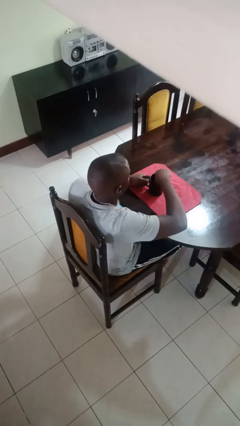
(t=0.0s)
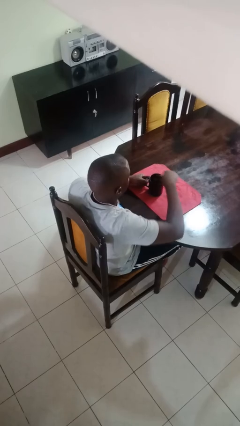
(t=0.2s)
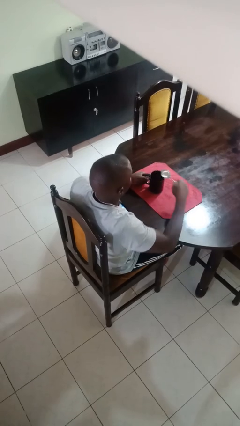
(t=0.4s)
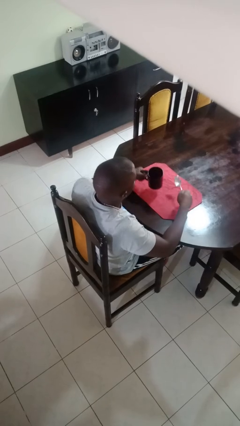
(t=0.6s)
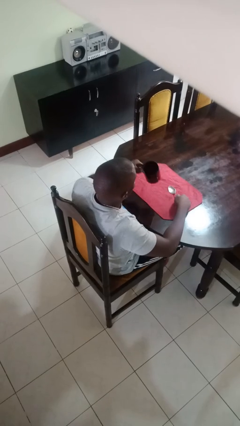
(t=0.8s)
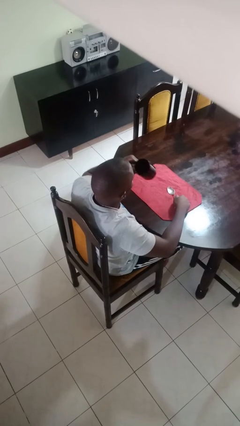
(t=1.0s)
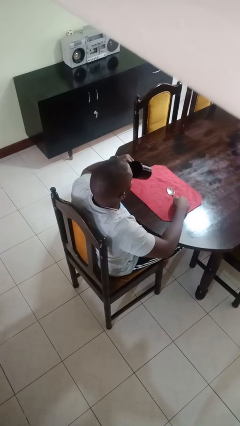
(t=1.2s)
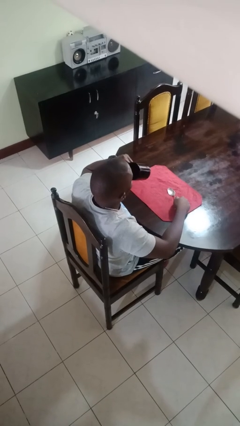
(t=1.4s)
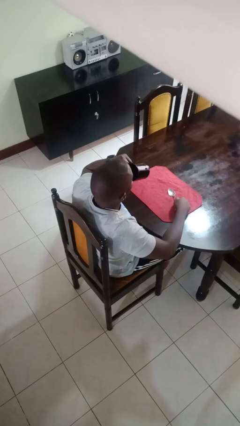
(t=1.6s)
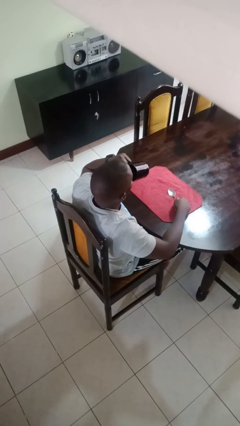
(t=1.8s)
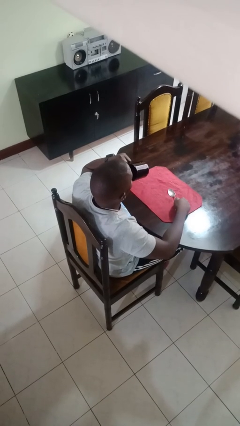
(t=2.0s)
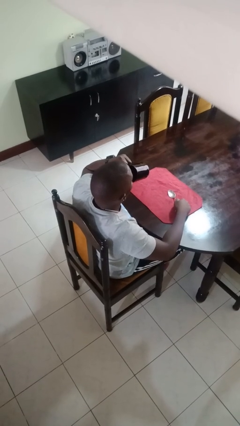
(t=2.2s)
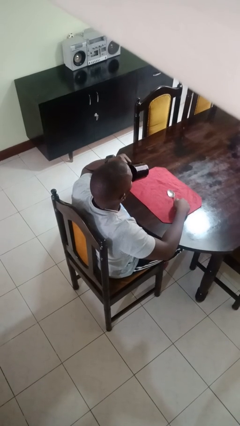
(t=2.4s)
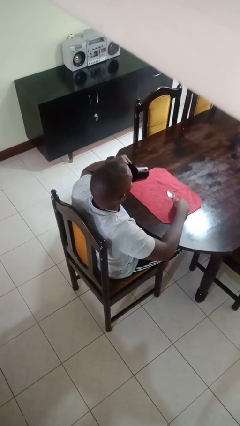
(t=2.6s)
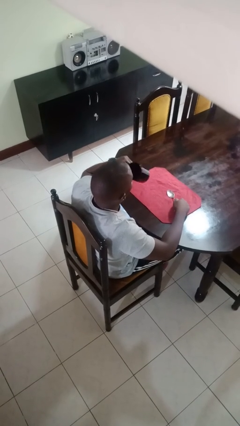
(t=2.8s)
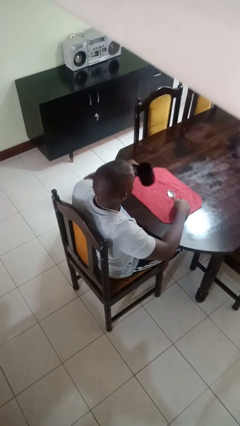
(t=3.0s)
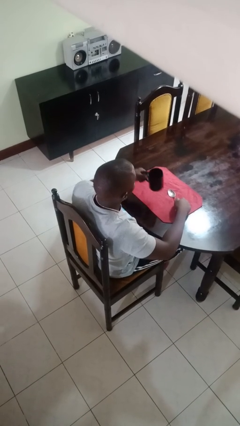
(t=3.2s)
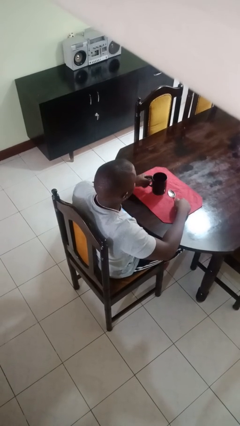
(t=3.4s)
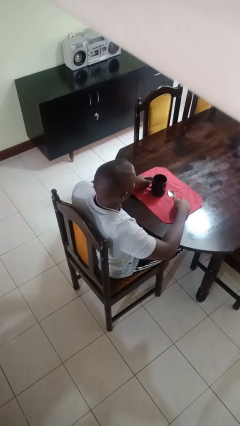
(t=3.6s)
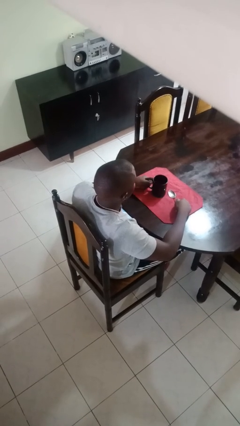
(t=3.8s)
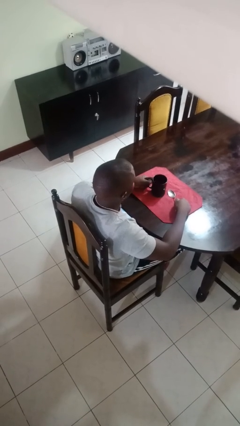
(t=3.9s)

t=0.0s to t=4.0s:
person drinks from mug

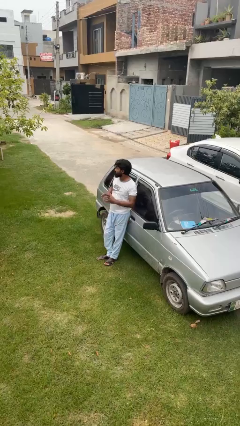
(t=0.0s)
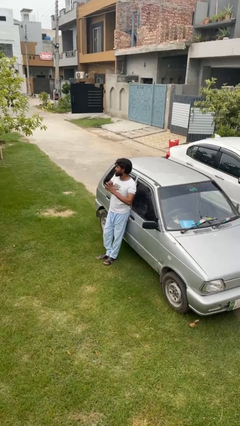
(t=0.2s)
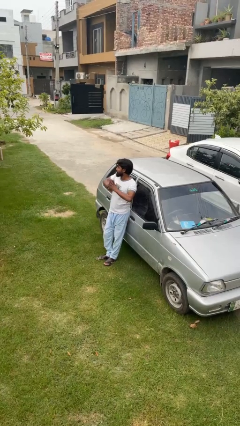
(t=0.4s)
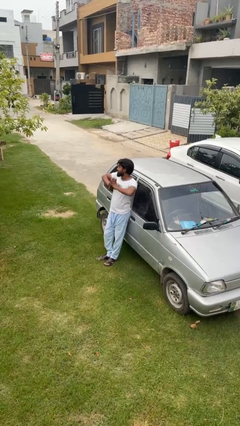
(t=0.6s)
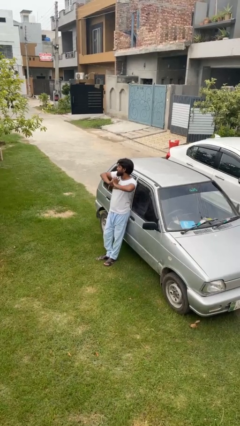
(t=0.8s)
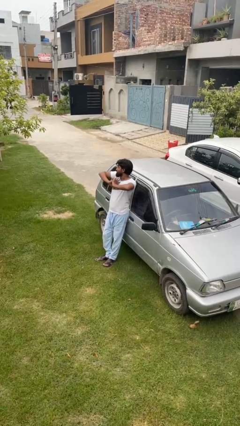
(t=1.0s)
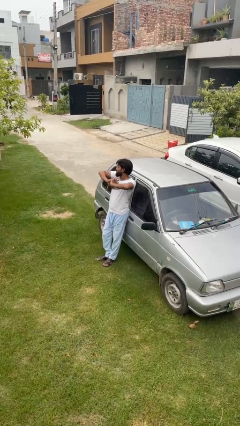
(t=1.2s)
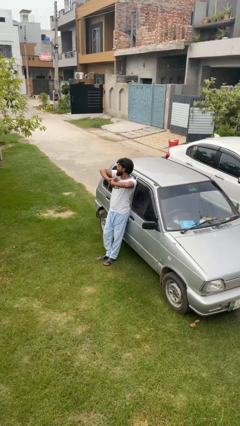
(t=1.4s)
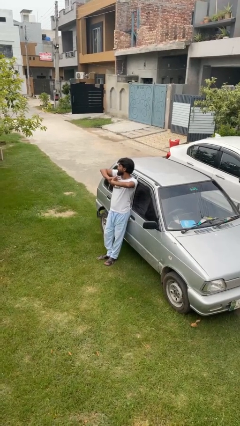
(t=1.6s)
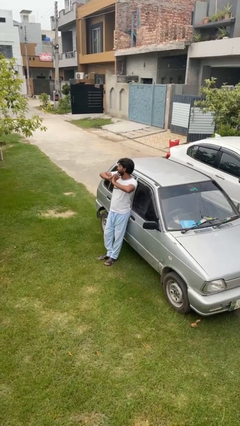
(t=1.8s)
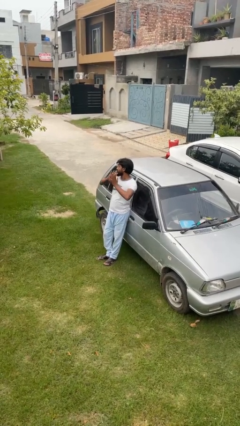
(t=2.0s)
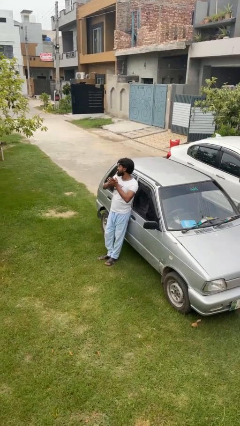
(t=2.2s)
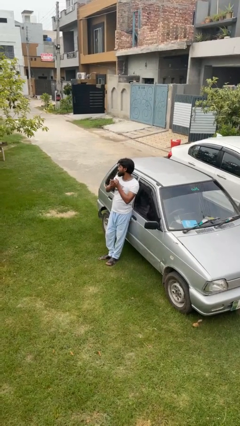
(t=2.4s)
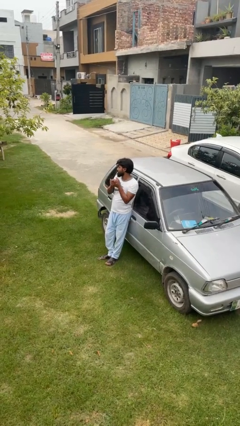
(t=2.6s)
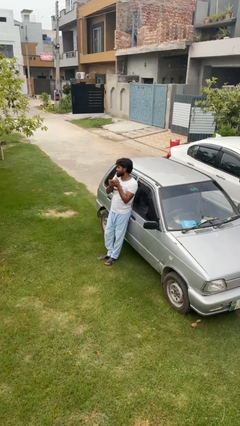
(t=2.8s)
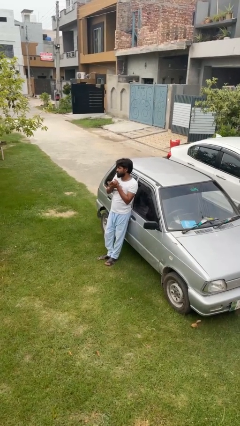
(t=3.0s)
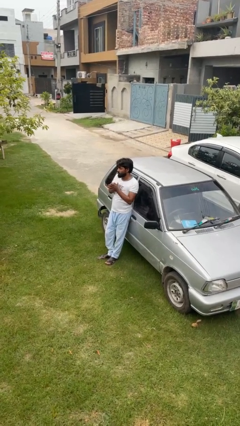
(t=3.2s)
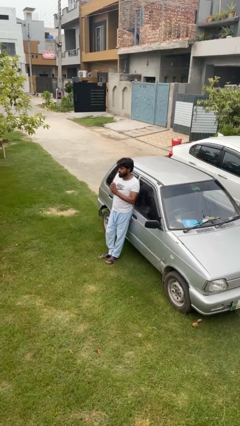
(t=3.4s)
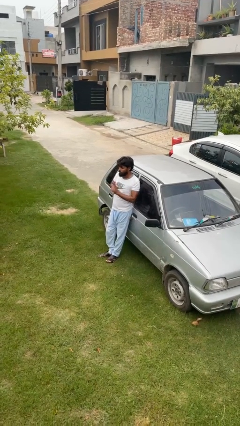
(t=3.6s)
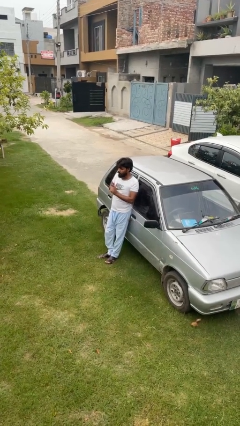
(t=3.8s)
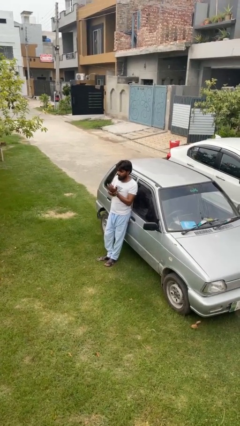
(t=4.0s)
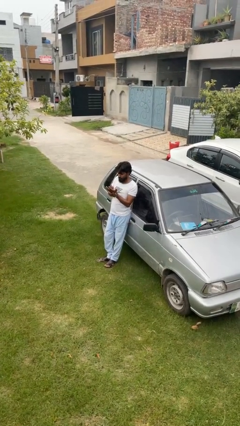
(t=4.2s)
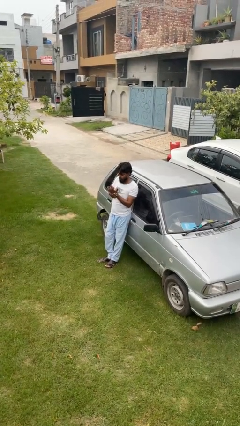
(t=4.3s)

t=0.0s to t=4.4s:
person cracks knuckles

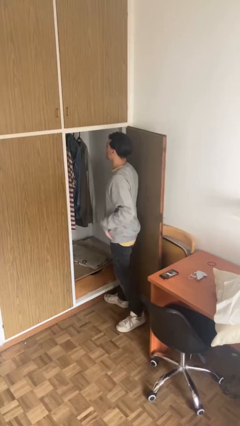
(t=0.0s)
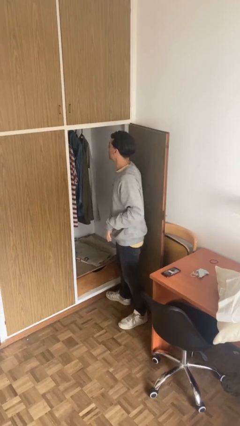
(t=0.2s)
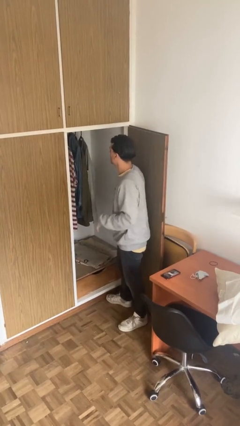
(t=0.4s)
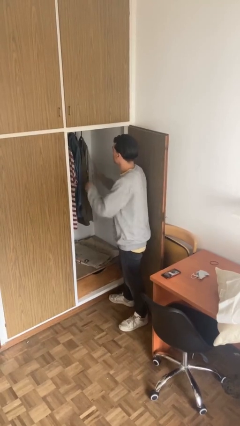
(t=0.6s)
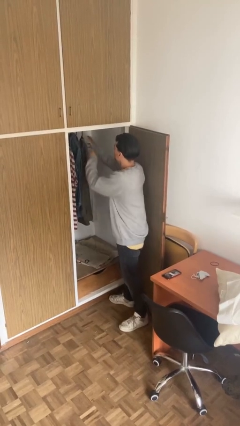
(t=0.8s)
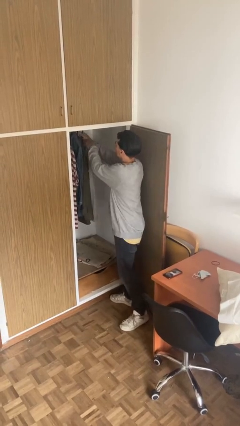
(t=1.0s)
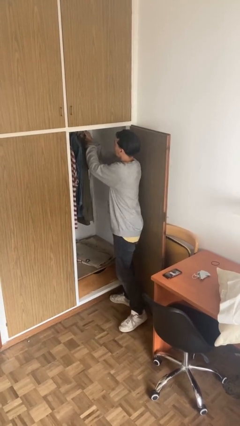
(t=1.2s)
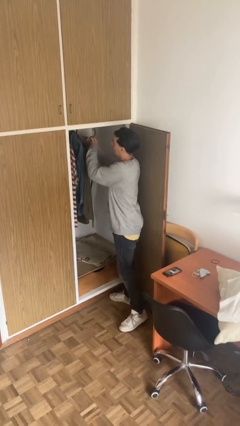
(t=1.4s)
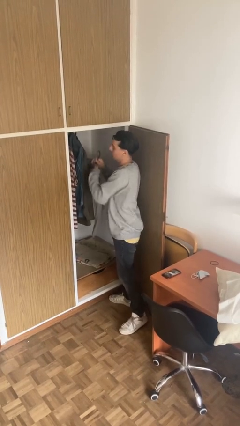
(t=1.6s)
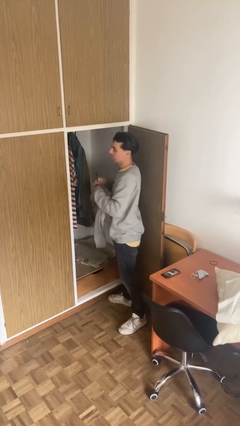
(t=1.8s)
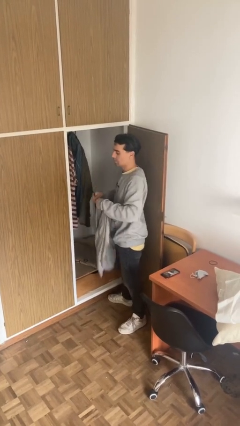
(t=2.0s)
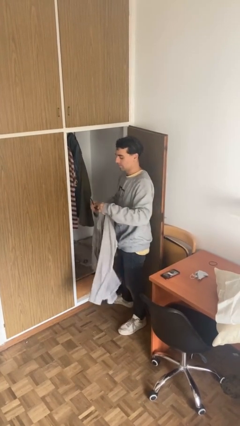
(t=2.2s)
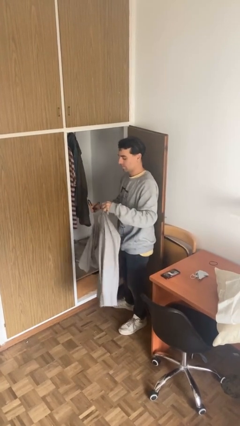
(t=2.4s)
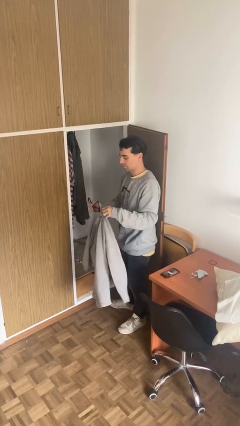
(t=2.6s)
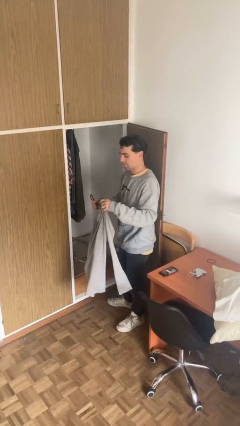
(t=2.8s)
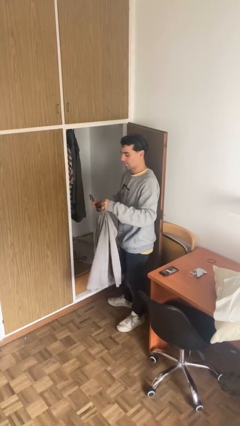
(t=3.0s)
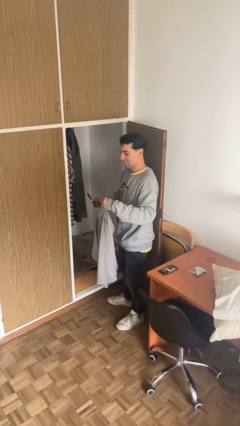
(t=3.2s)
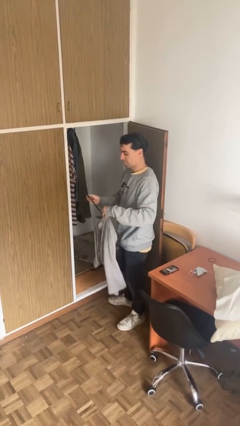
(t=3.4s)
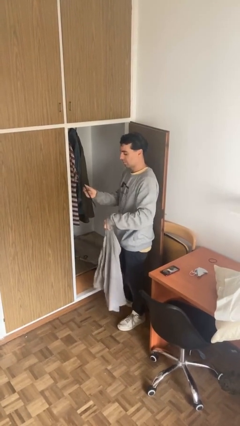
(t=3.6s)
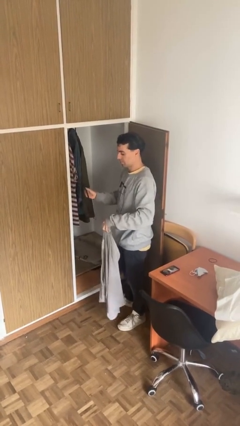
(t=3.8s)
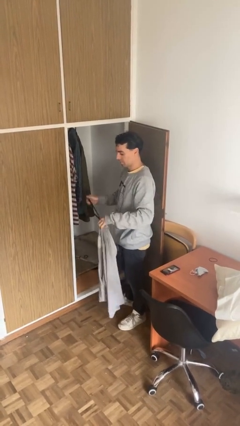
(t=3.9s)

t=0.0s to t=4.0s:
person takes clothes from closet

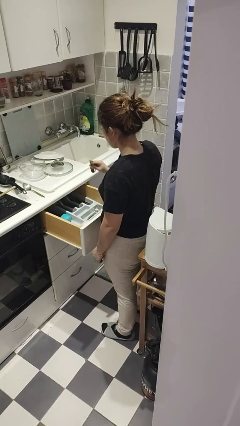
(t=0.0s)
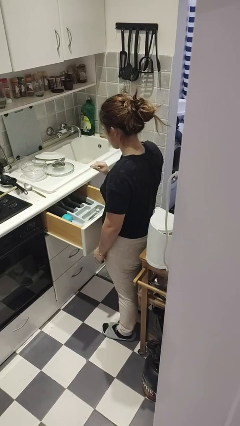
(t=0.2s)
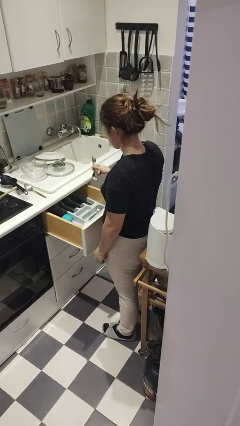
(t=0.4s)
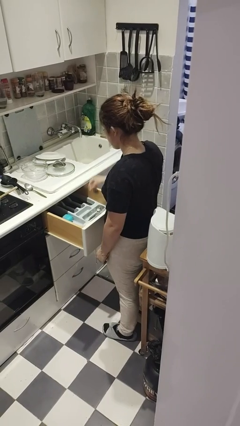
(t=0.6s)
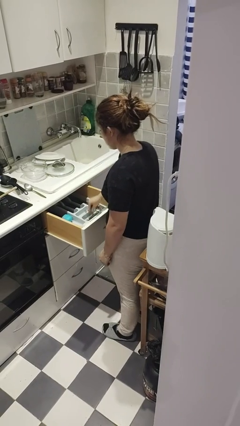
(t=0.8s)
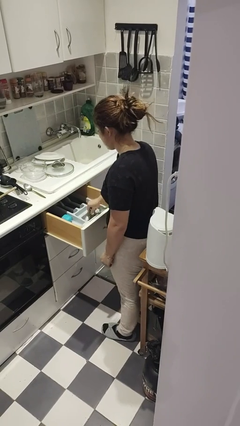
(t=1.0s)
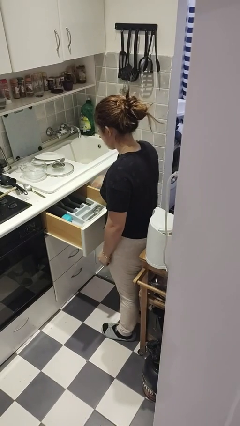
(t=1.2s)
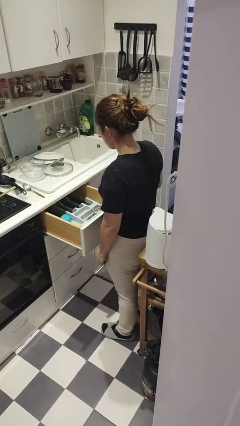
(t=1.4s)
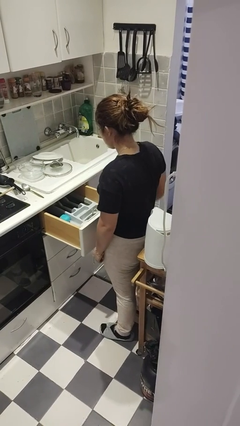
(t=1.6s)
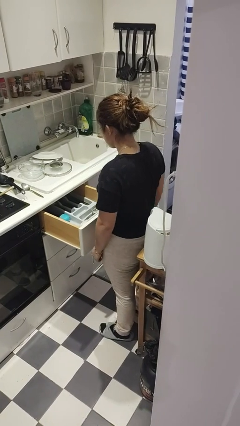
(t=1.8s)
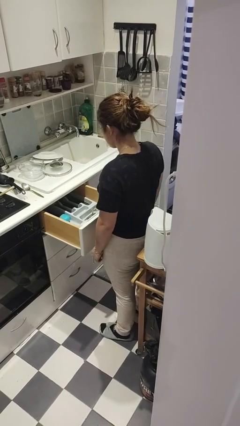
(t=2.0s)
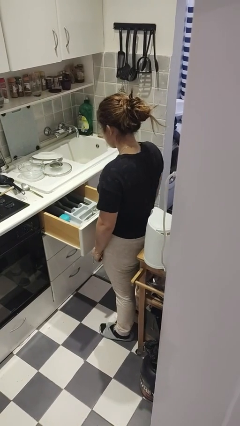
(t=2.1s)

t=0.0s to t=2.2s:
person puts object into kitchen drawer

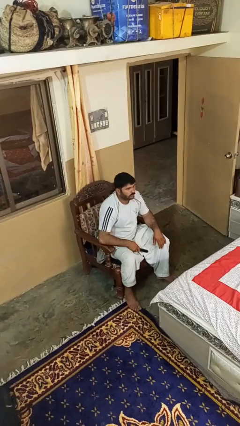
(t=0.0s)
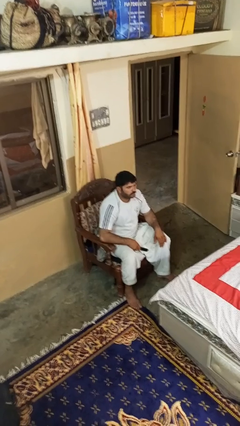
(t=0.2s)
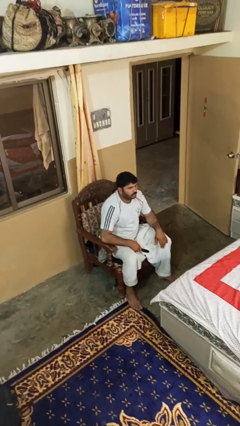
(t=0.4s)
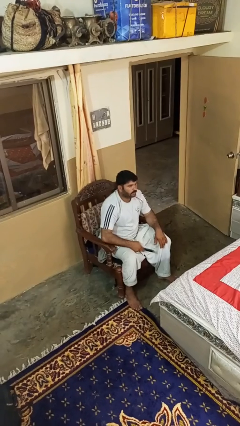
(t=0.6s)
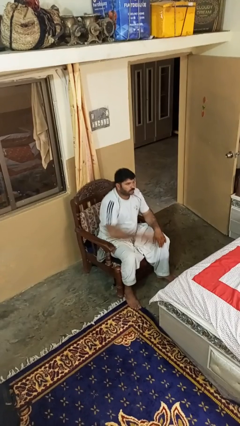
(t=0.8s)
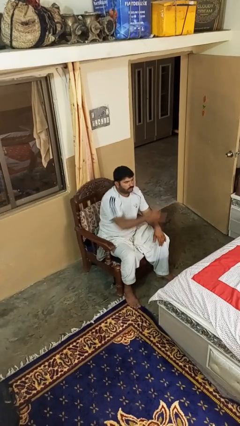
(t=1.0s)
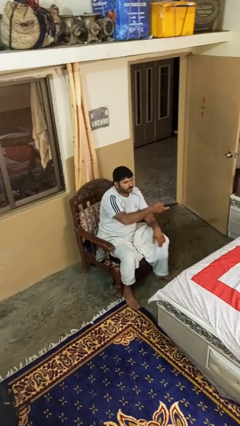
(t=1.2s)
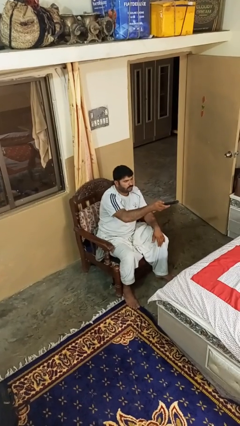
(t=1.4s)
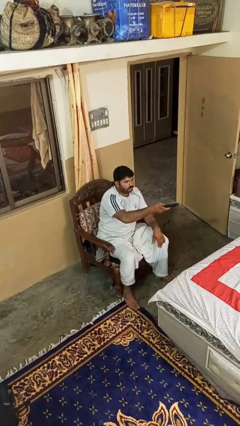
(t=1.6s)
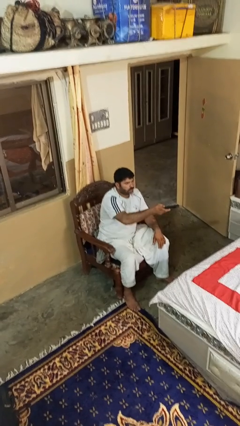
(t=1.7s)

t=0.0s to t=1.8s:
person uses television remote

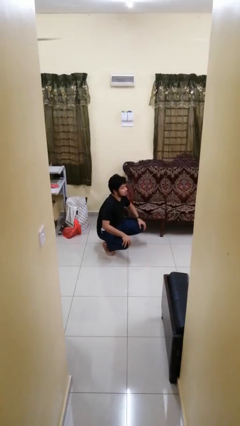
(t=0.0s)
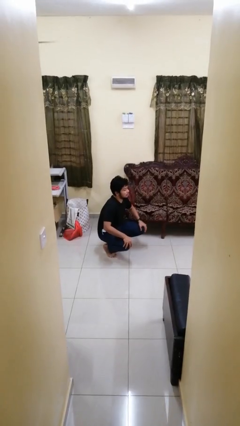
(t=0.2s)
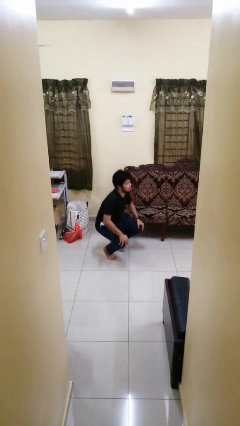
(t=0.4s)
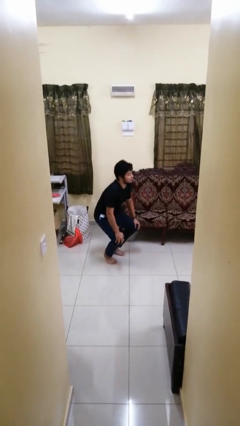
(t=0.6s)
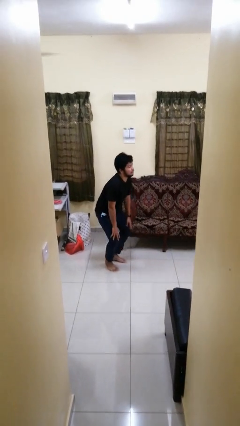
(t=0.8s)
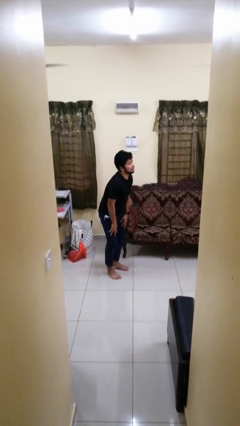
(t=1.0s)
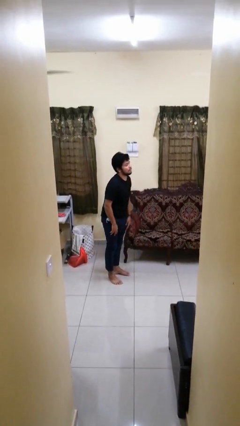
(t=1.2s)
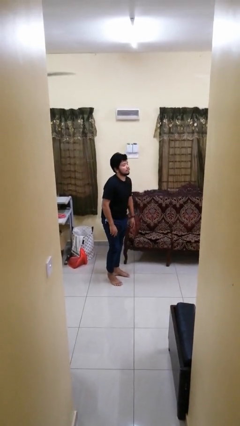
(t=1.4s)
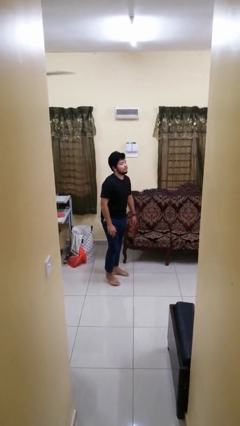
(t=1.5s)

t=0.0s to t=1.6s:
person stands up
